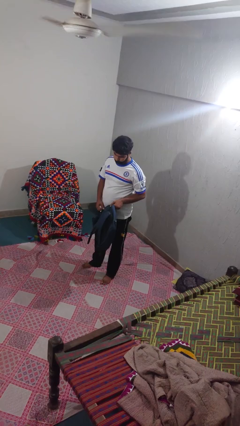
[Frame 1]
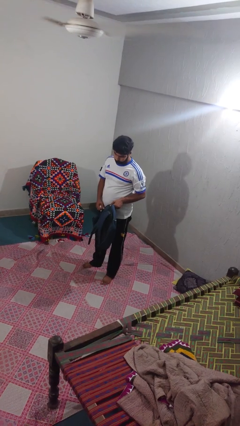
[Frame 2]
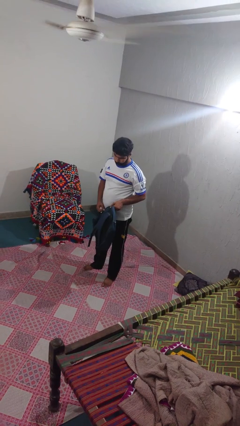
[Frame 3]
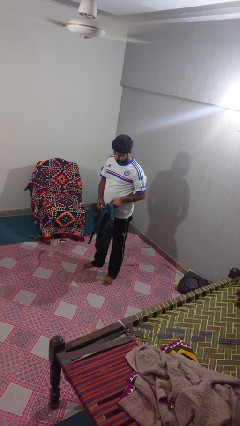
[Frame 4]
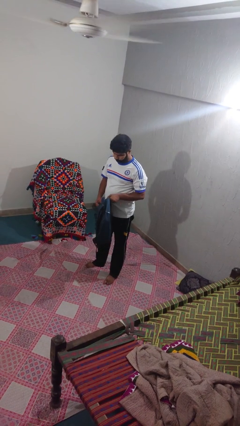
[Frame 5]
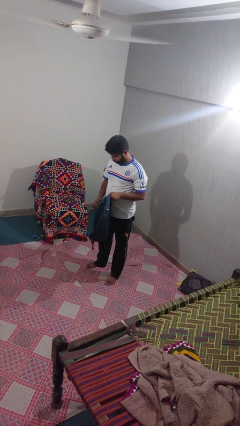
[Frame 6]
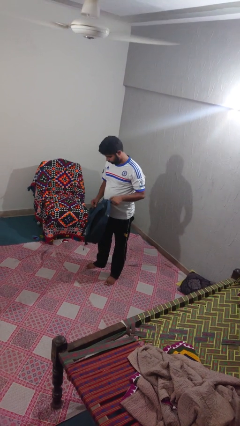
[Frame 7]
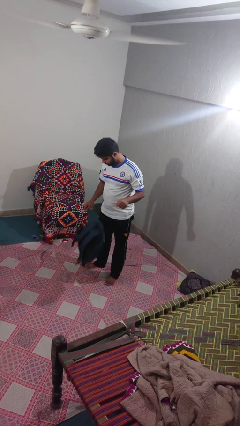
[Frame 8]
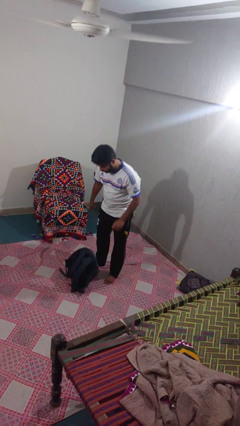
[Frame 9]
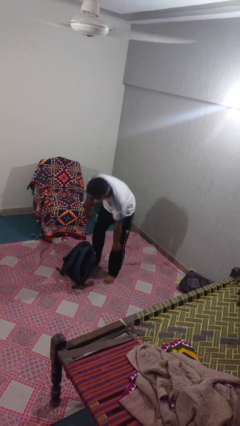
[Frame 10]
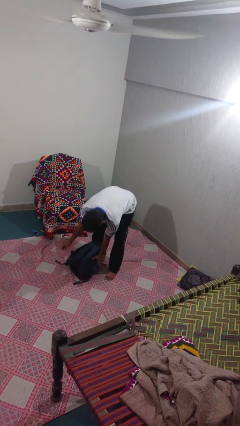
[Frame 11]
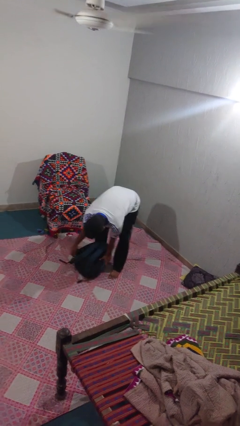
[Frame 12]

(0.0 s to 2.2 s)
person drops object

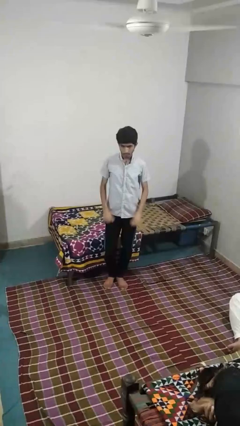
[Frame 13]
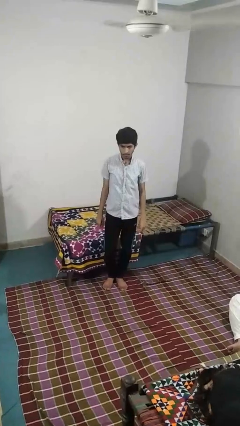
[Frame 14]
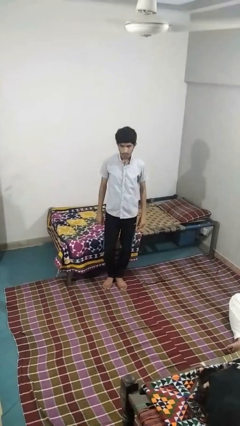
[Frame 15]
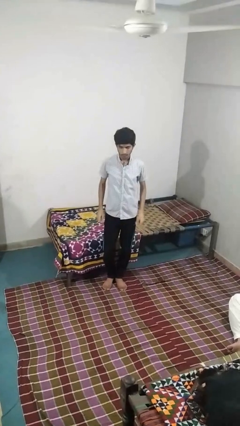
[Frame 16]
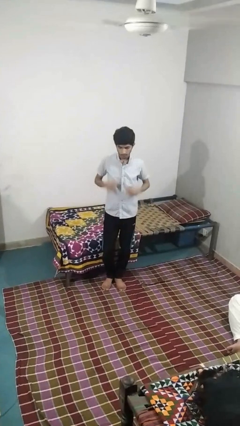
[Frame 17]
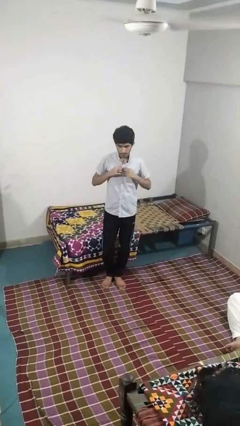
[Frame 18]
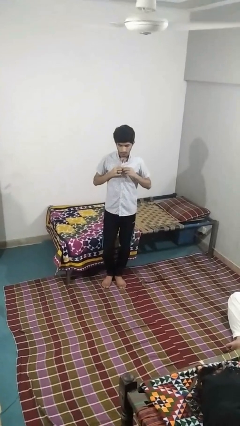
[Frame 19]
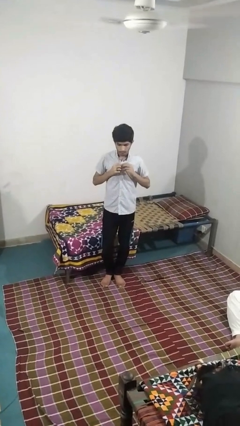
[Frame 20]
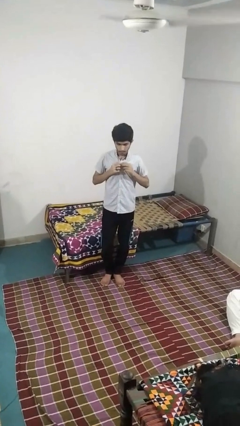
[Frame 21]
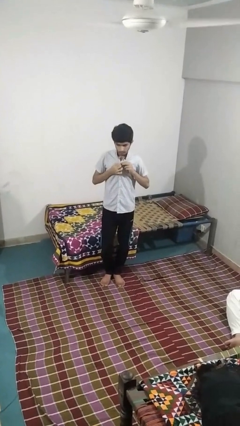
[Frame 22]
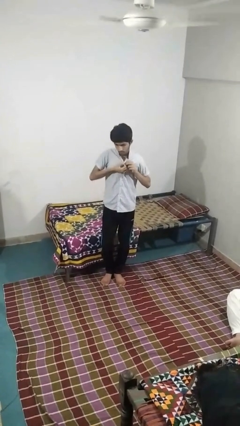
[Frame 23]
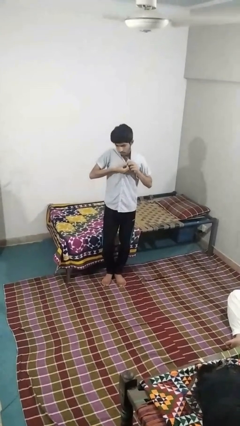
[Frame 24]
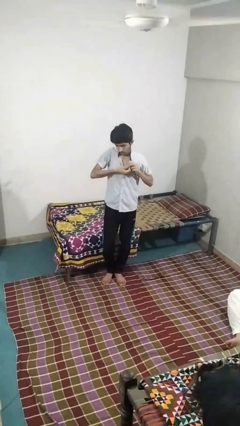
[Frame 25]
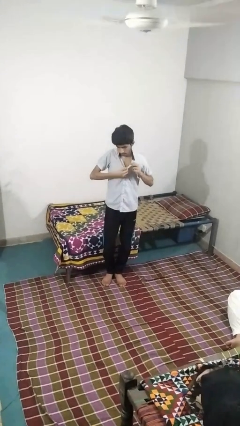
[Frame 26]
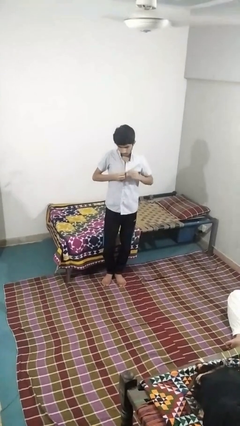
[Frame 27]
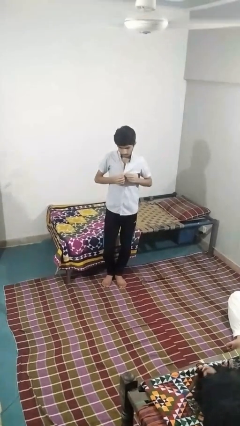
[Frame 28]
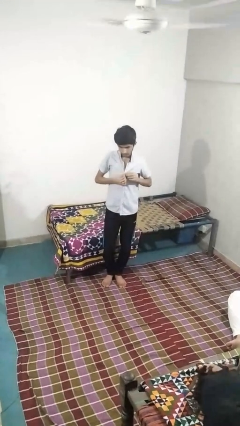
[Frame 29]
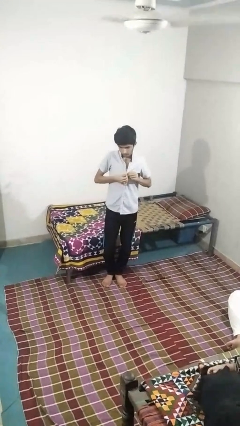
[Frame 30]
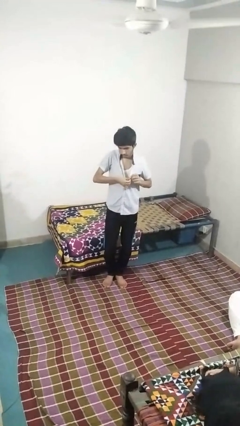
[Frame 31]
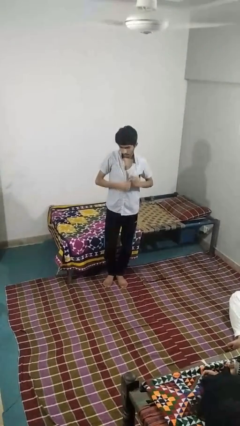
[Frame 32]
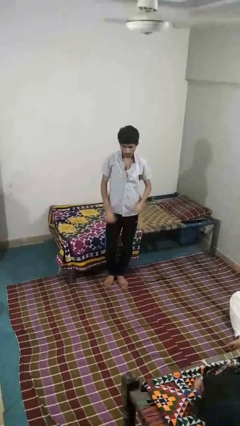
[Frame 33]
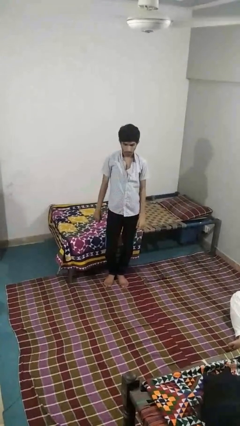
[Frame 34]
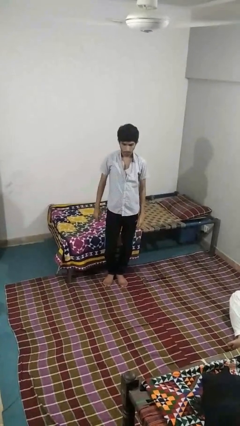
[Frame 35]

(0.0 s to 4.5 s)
person unbuttons shirt

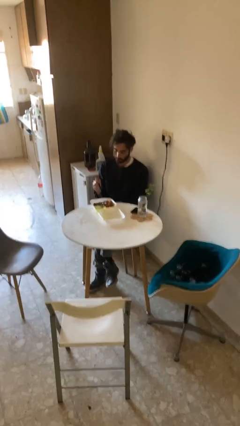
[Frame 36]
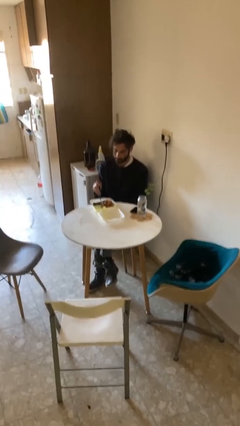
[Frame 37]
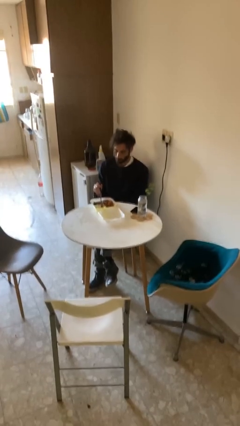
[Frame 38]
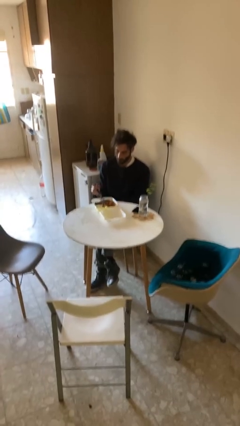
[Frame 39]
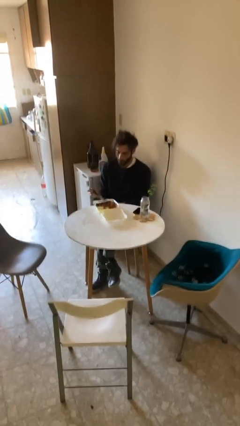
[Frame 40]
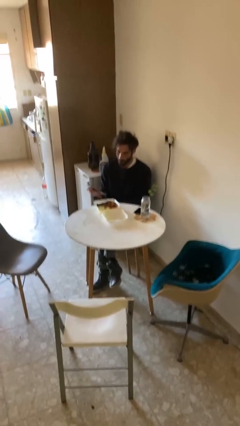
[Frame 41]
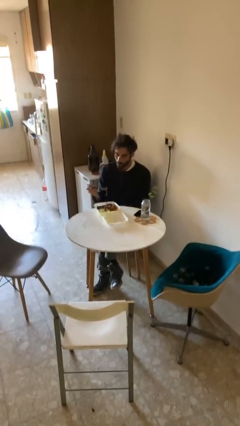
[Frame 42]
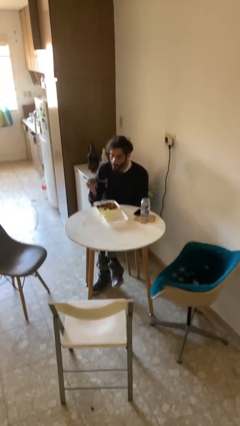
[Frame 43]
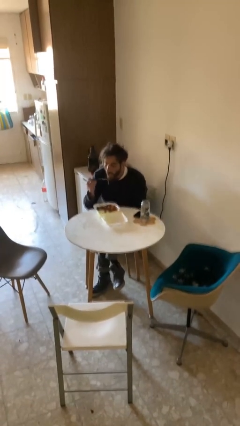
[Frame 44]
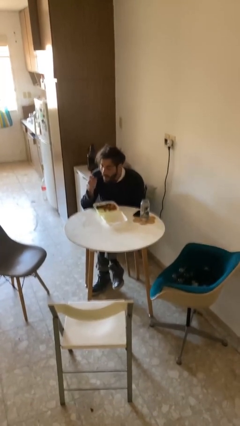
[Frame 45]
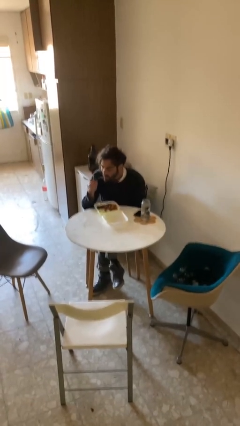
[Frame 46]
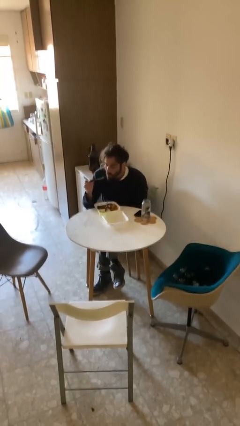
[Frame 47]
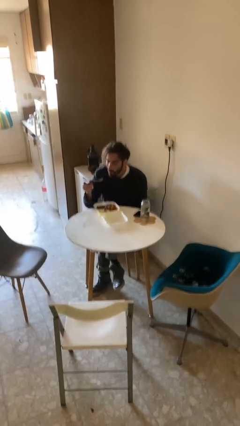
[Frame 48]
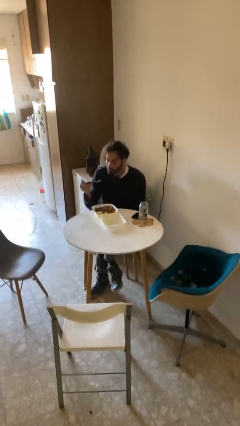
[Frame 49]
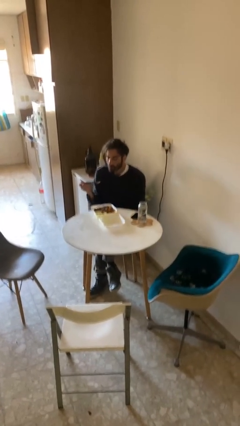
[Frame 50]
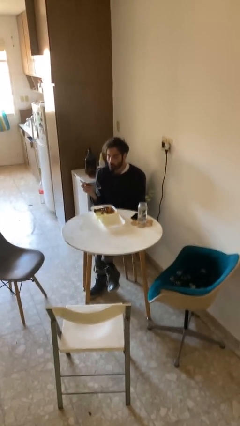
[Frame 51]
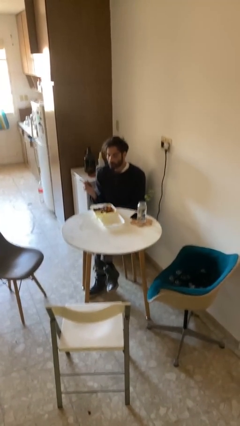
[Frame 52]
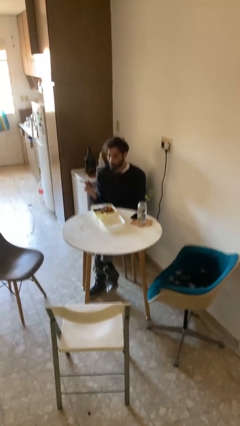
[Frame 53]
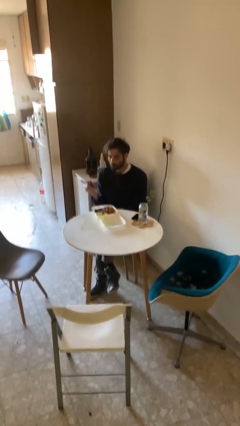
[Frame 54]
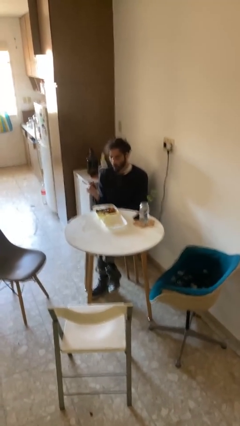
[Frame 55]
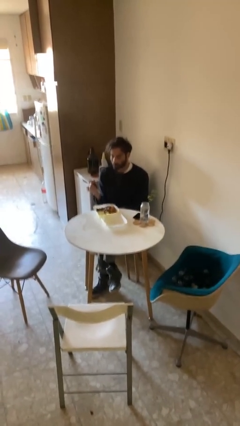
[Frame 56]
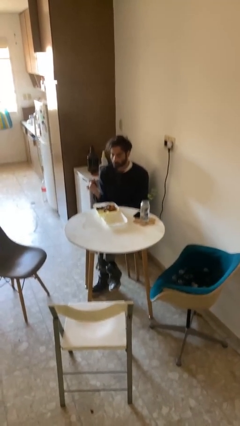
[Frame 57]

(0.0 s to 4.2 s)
person eats with utensil

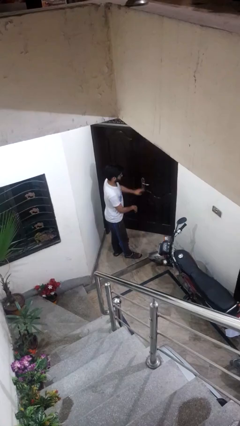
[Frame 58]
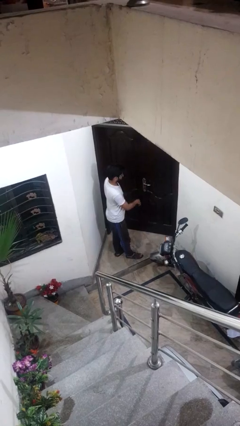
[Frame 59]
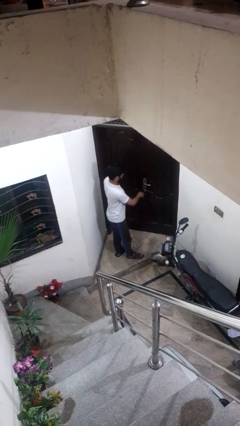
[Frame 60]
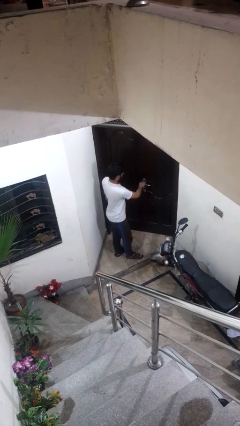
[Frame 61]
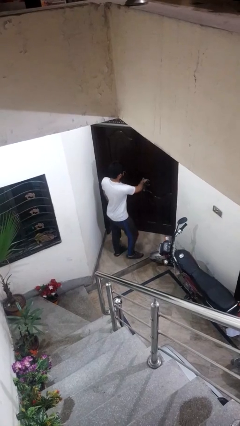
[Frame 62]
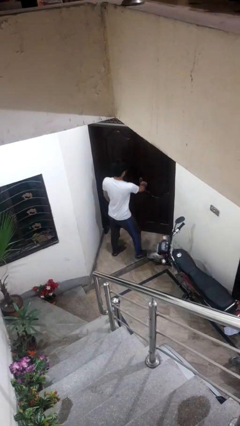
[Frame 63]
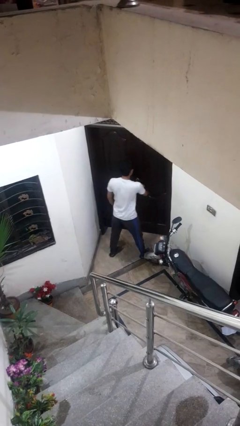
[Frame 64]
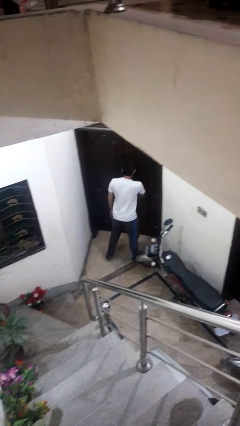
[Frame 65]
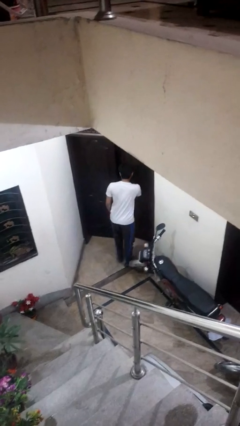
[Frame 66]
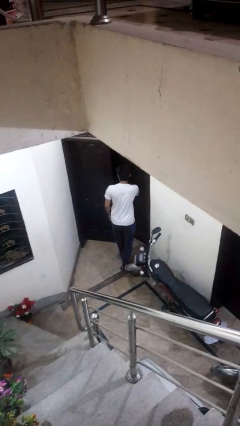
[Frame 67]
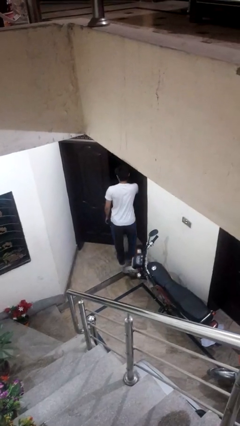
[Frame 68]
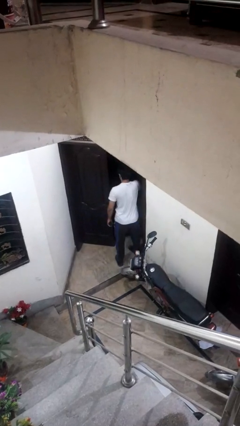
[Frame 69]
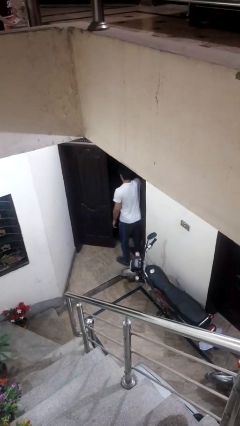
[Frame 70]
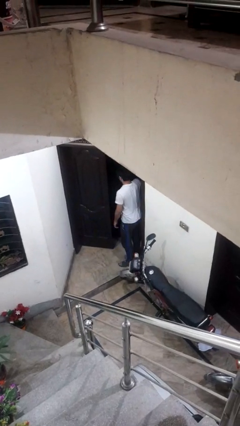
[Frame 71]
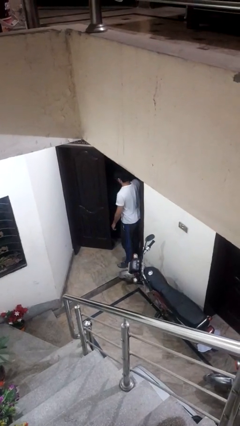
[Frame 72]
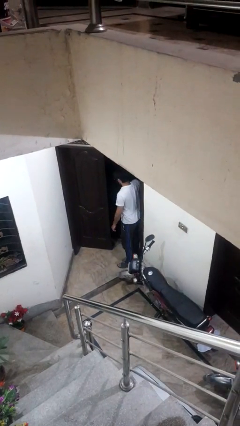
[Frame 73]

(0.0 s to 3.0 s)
person opens facility door

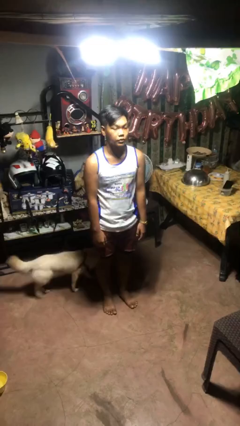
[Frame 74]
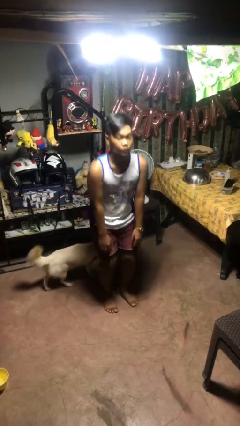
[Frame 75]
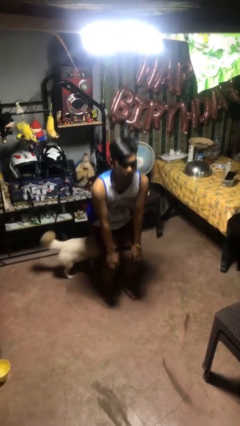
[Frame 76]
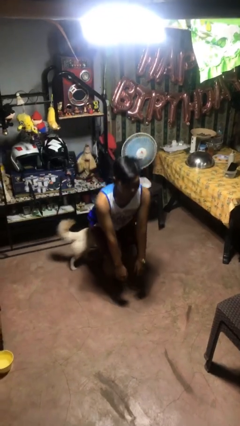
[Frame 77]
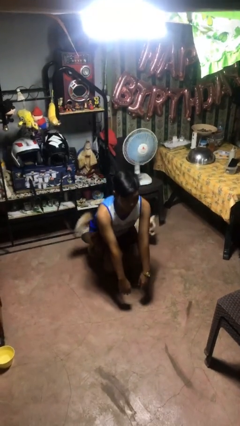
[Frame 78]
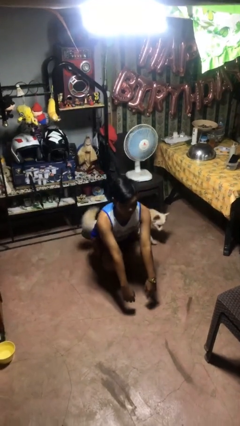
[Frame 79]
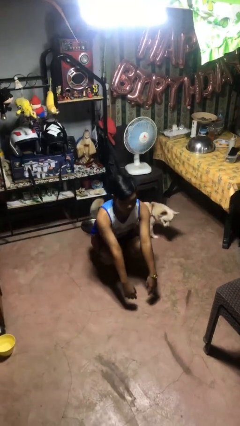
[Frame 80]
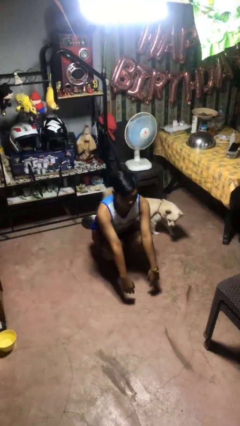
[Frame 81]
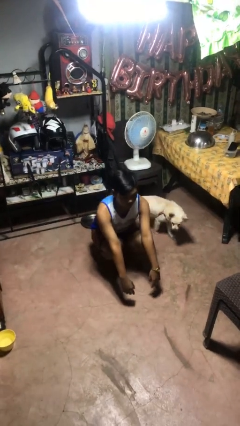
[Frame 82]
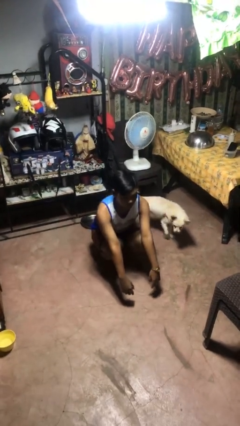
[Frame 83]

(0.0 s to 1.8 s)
person squats

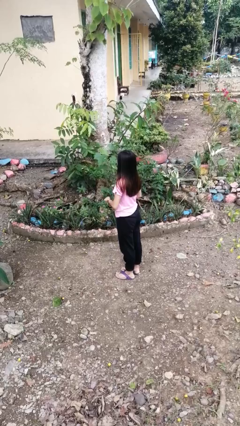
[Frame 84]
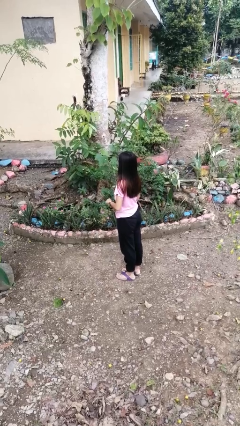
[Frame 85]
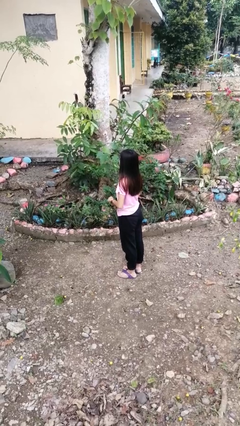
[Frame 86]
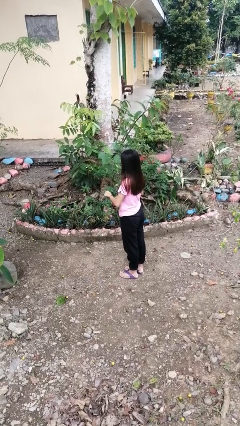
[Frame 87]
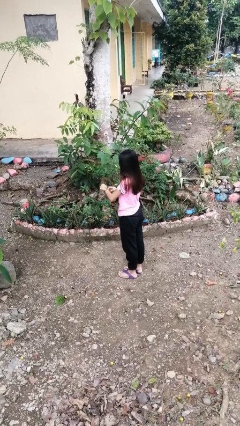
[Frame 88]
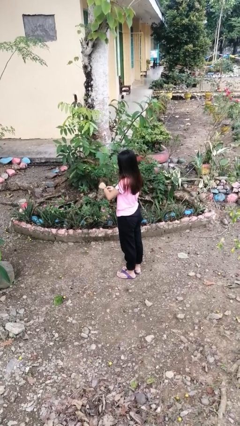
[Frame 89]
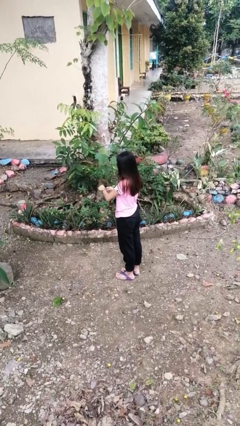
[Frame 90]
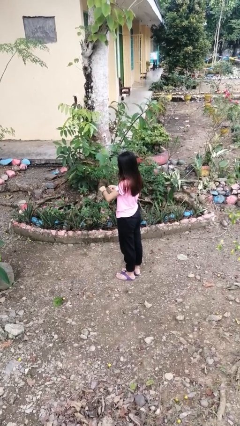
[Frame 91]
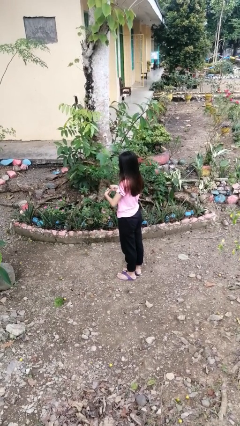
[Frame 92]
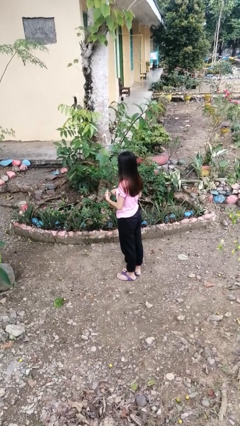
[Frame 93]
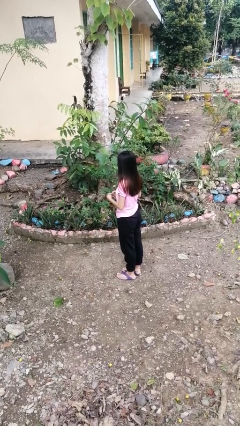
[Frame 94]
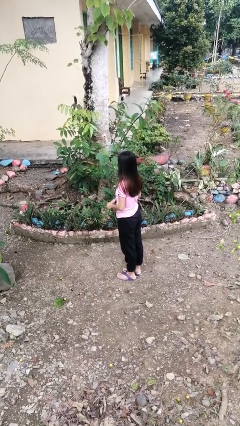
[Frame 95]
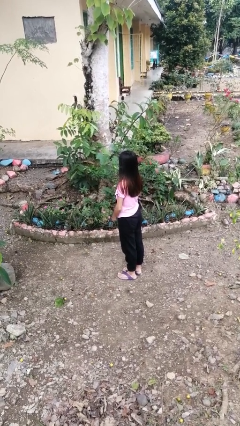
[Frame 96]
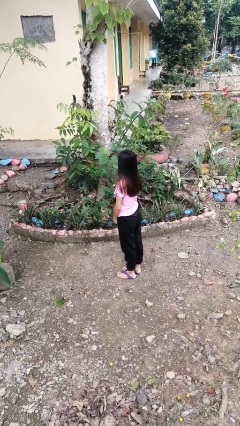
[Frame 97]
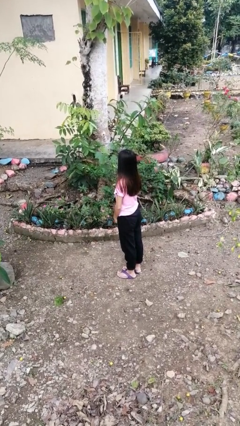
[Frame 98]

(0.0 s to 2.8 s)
person takes off wristwatch
